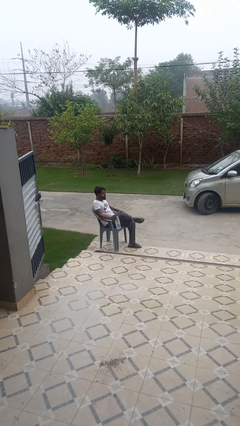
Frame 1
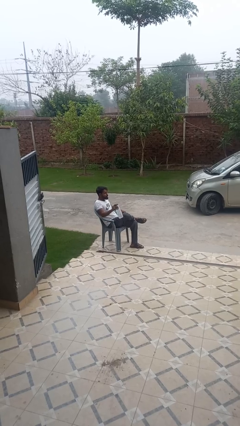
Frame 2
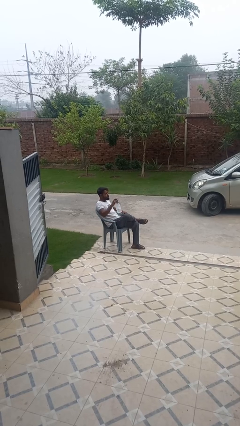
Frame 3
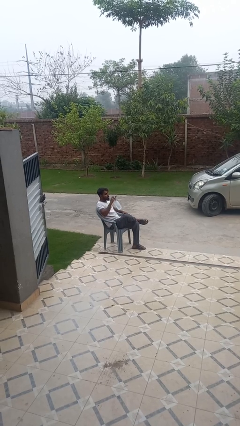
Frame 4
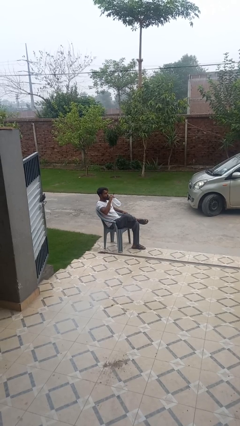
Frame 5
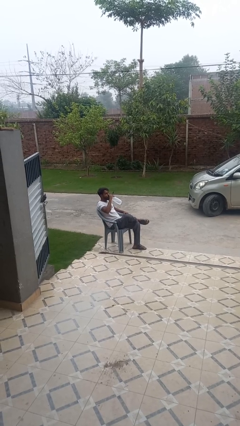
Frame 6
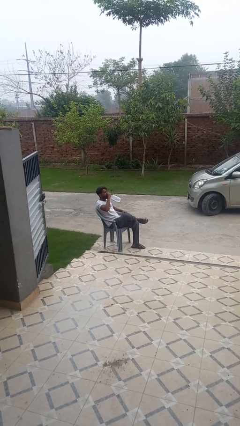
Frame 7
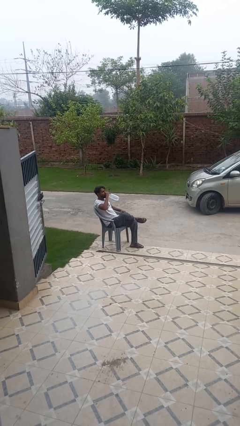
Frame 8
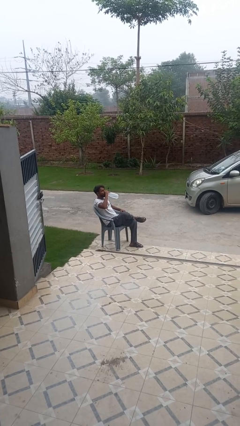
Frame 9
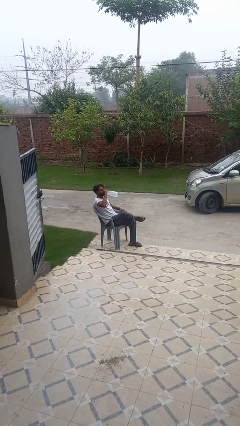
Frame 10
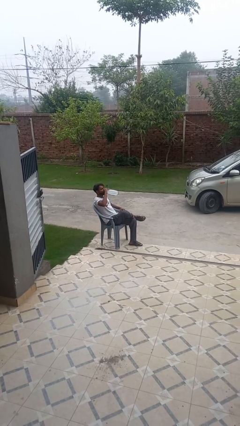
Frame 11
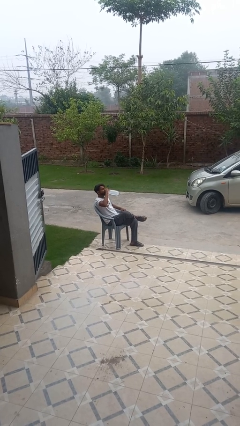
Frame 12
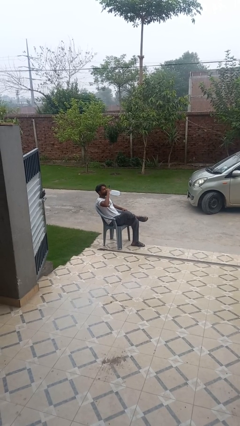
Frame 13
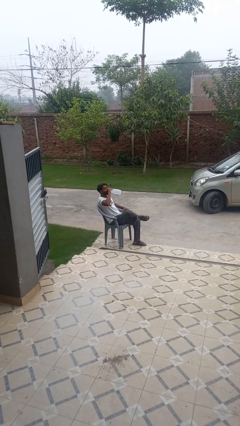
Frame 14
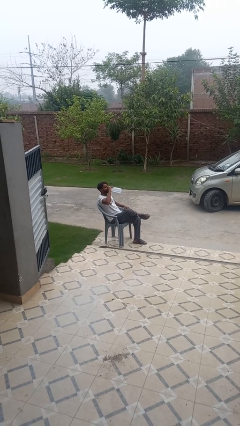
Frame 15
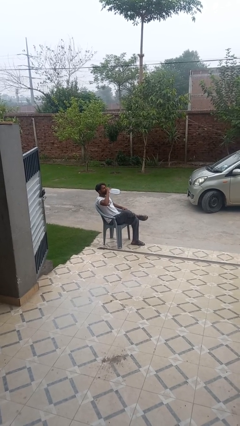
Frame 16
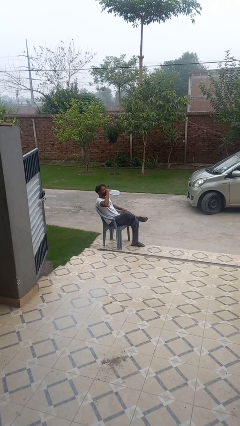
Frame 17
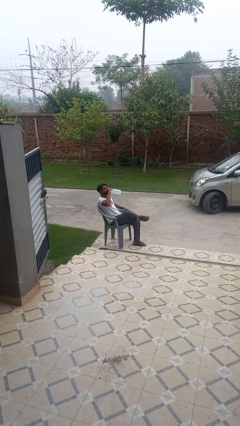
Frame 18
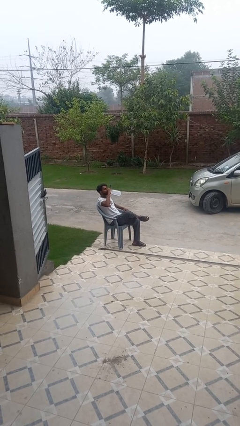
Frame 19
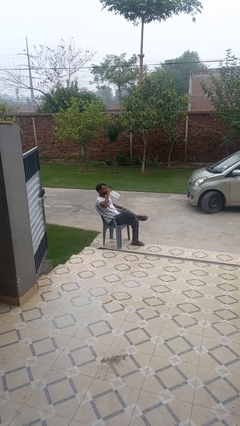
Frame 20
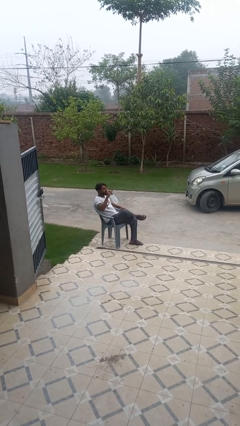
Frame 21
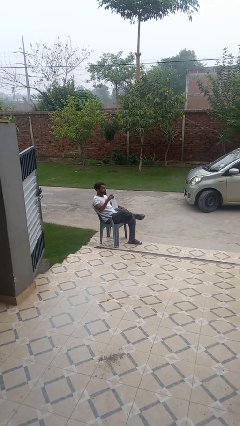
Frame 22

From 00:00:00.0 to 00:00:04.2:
person drinks from bottle

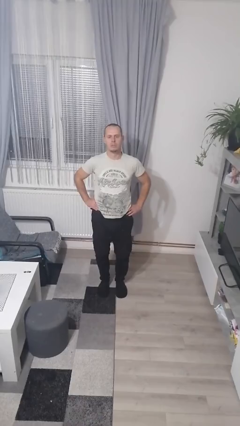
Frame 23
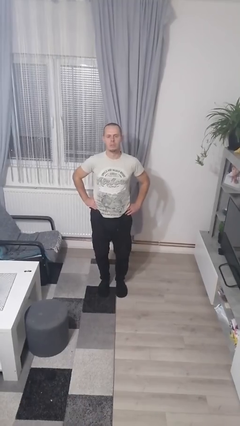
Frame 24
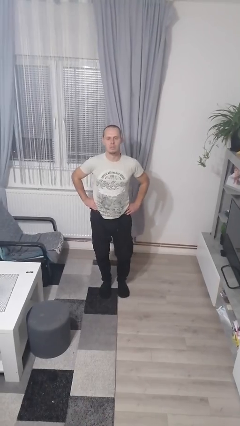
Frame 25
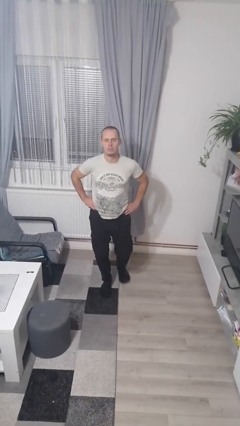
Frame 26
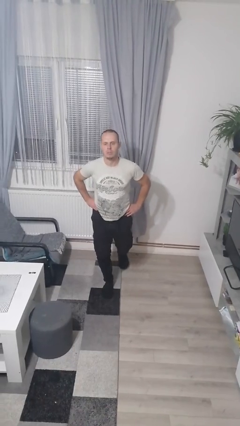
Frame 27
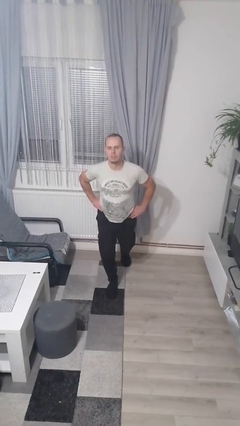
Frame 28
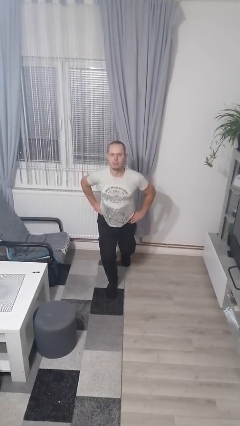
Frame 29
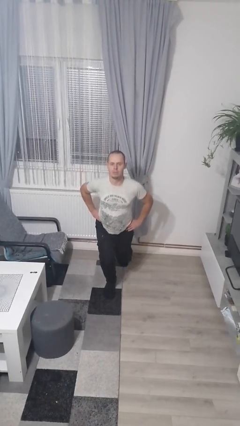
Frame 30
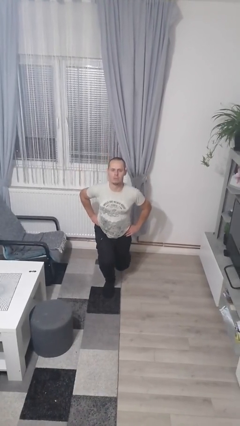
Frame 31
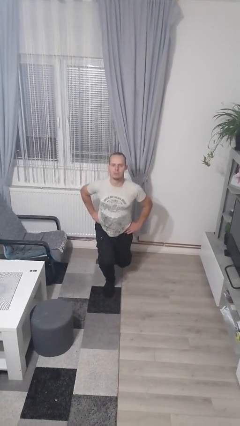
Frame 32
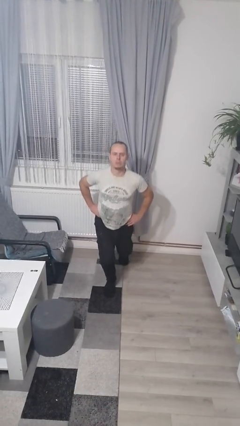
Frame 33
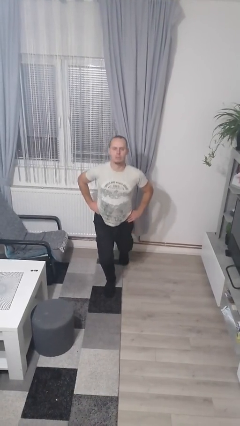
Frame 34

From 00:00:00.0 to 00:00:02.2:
person exercises with lunges

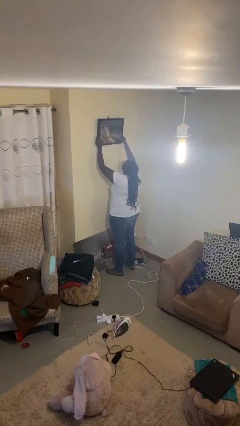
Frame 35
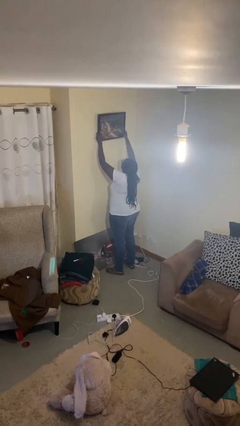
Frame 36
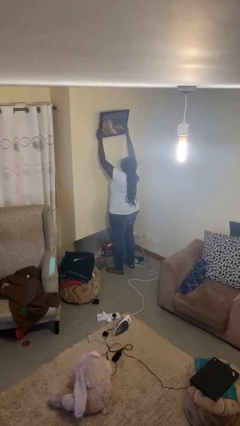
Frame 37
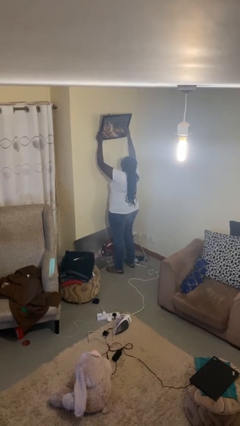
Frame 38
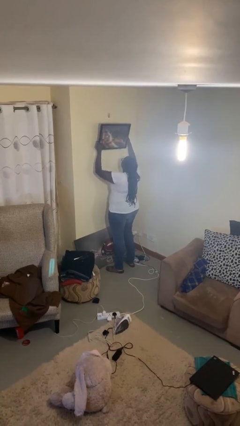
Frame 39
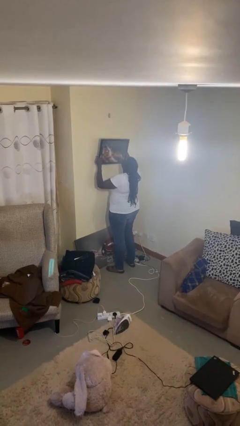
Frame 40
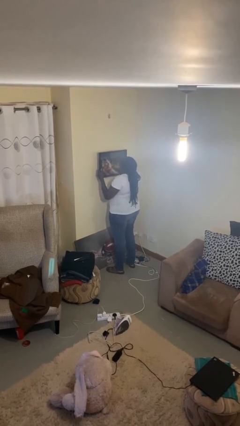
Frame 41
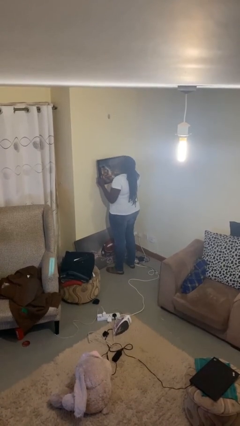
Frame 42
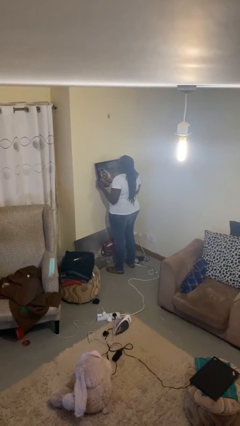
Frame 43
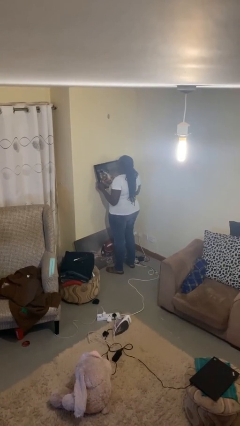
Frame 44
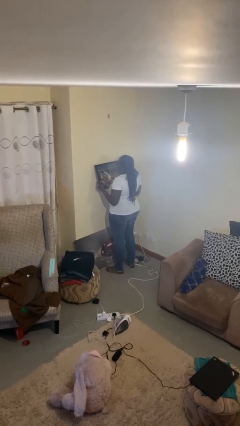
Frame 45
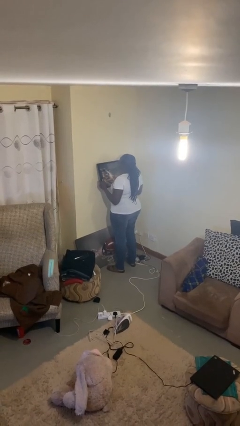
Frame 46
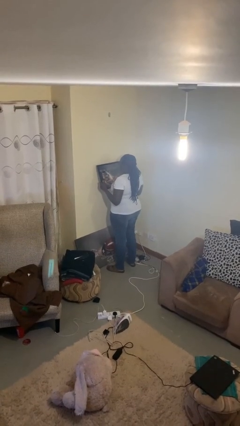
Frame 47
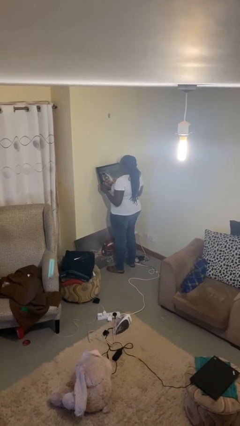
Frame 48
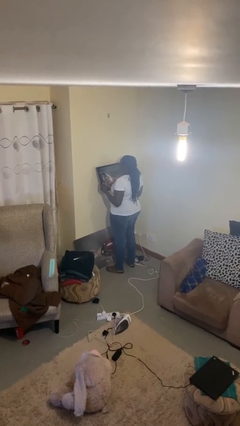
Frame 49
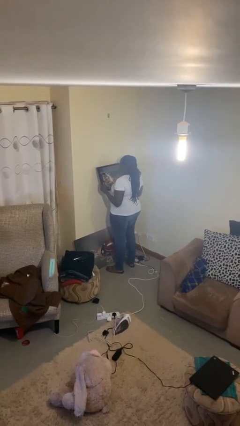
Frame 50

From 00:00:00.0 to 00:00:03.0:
person takes down picture frame

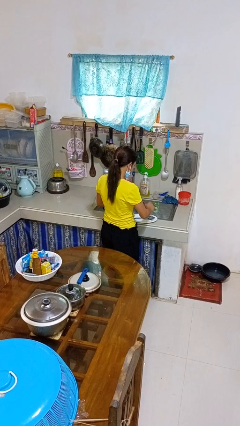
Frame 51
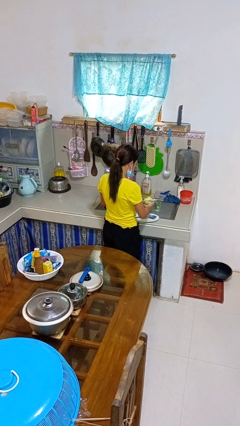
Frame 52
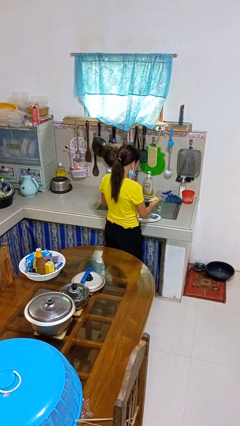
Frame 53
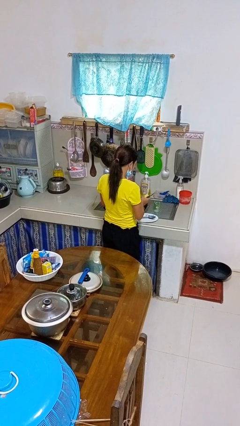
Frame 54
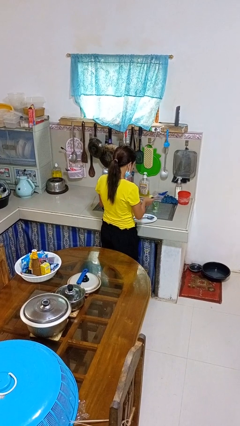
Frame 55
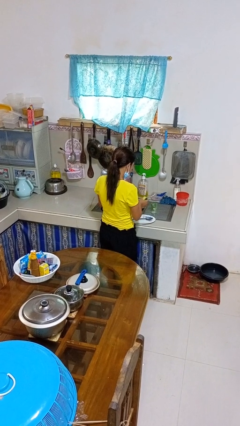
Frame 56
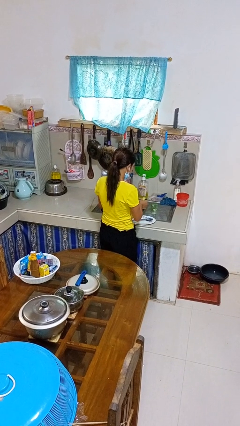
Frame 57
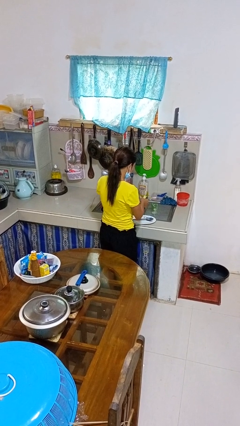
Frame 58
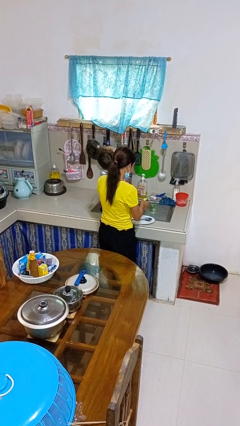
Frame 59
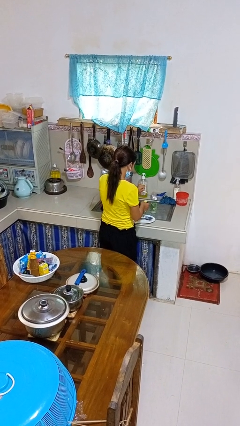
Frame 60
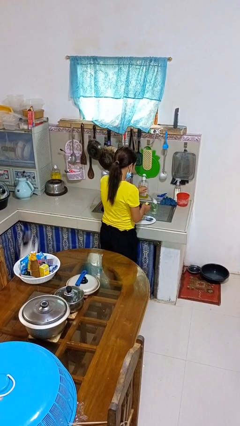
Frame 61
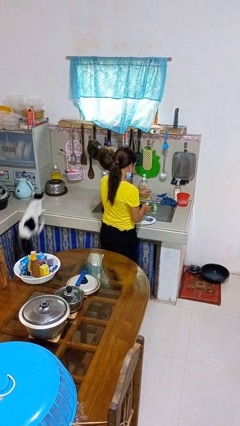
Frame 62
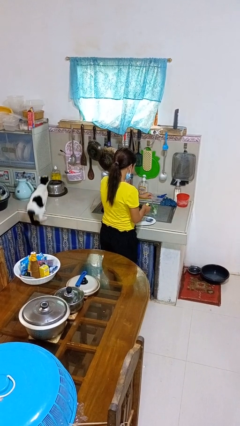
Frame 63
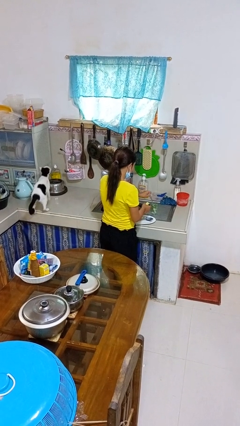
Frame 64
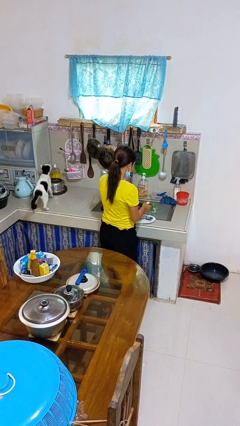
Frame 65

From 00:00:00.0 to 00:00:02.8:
person washes dish

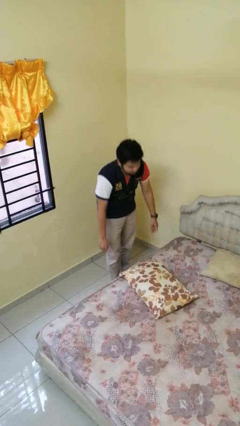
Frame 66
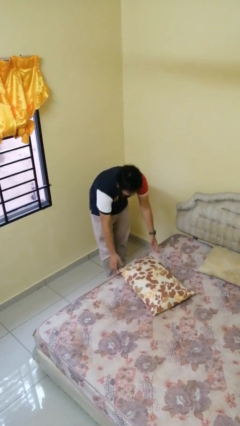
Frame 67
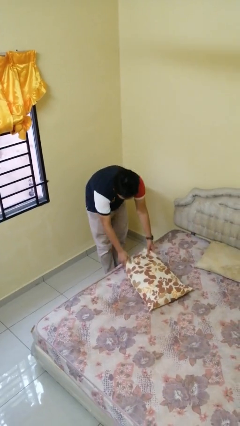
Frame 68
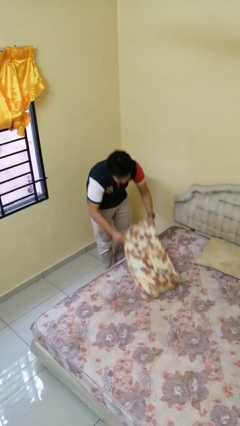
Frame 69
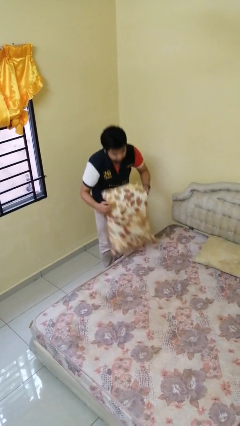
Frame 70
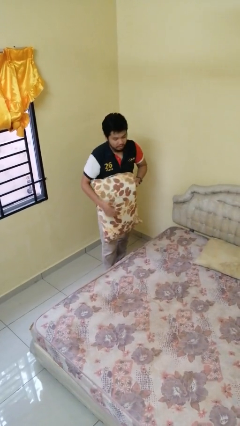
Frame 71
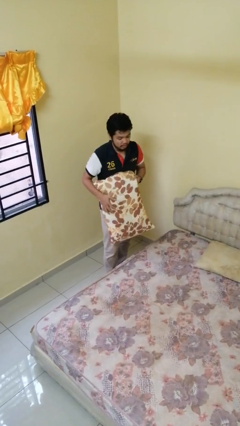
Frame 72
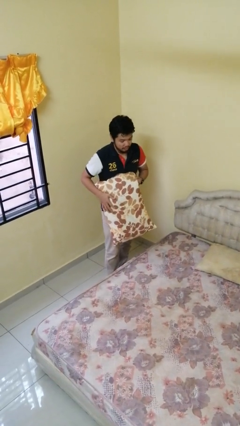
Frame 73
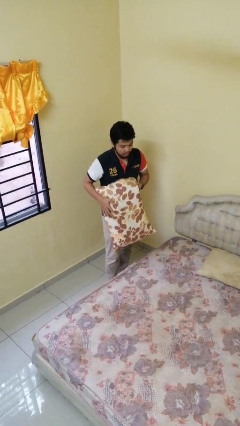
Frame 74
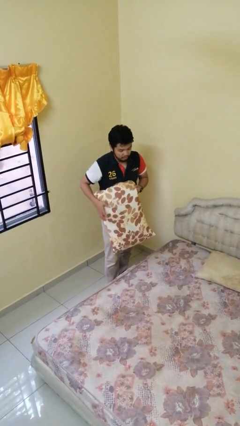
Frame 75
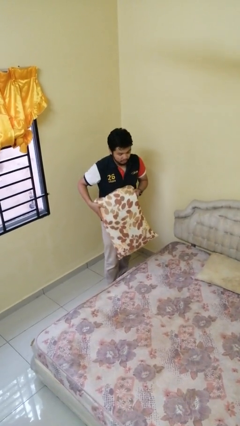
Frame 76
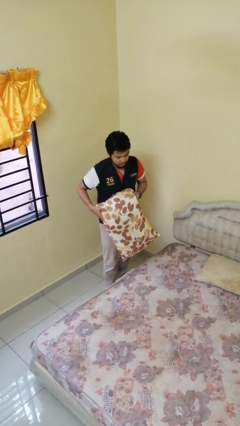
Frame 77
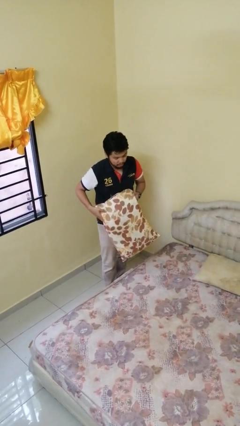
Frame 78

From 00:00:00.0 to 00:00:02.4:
person picks up object from bed

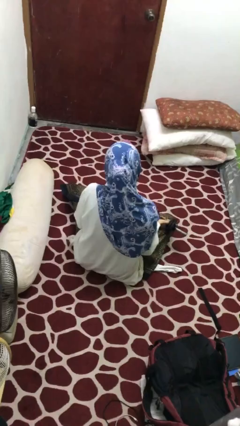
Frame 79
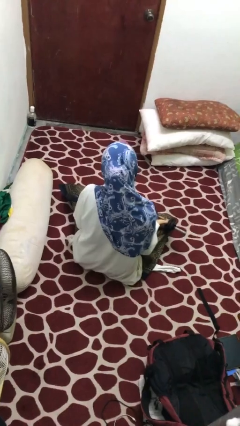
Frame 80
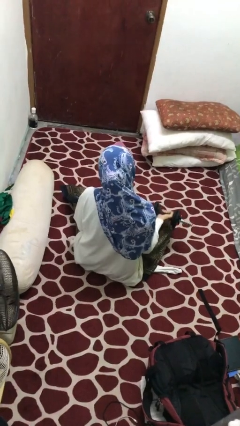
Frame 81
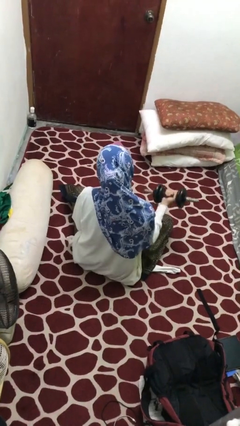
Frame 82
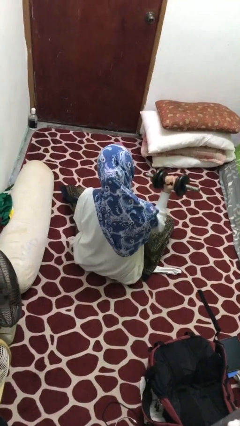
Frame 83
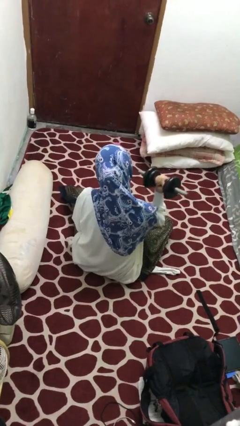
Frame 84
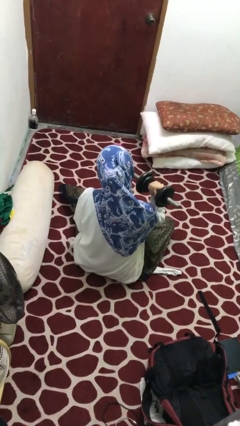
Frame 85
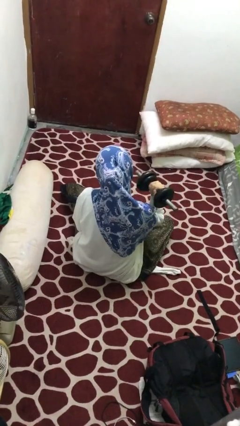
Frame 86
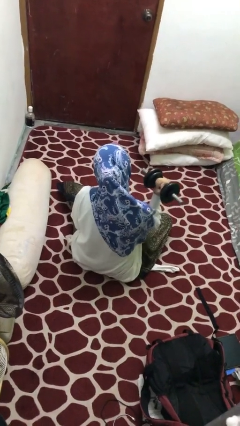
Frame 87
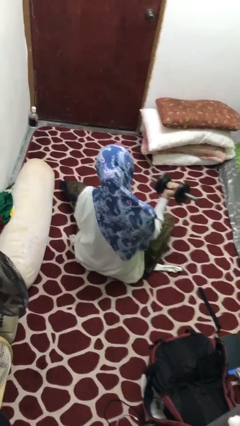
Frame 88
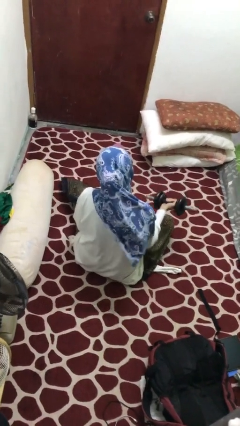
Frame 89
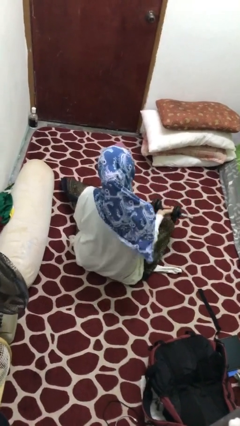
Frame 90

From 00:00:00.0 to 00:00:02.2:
person lifts dumbbells

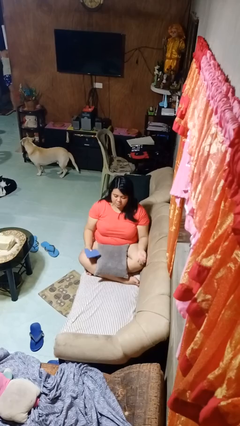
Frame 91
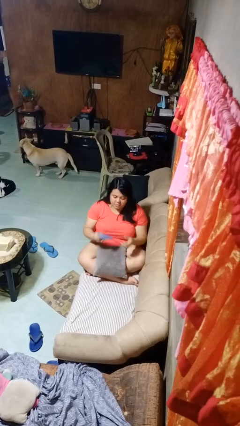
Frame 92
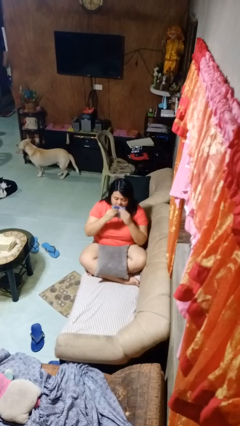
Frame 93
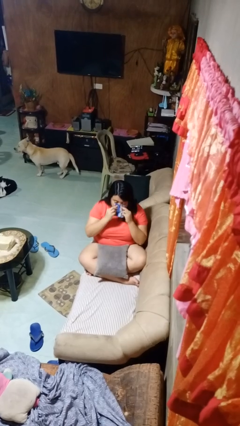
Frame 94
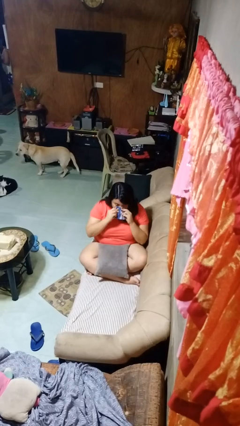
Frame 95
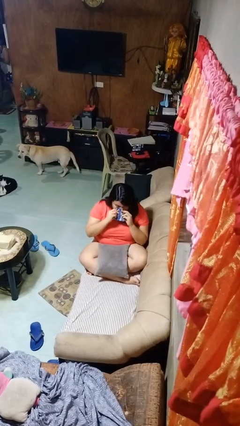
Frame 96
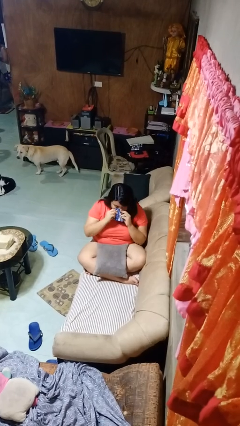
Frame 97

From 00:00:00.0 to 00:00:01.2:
person blows nose
